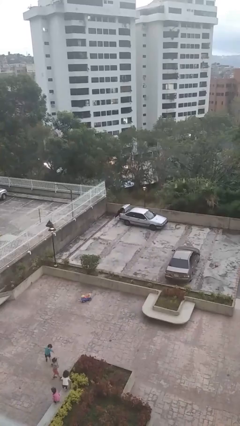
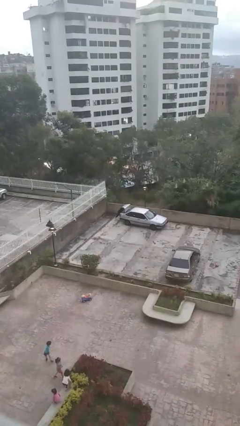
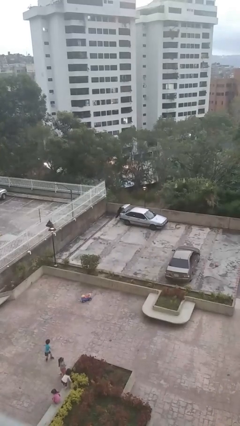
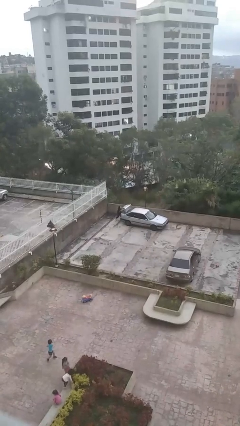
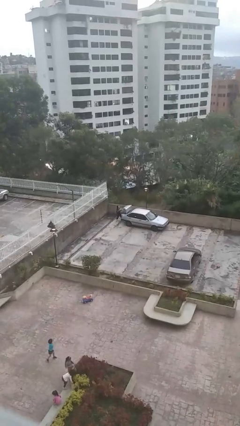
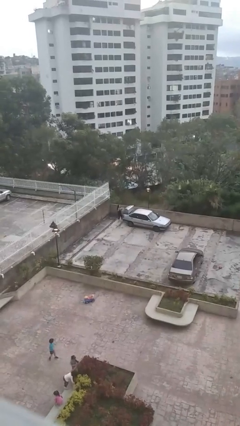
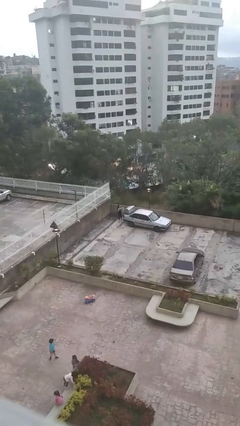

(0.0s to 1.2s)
person unloads car

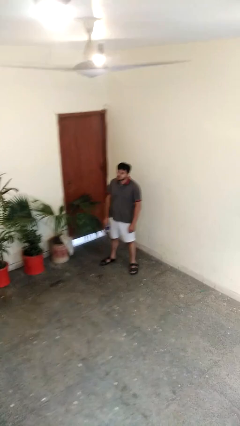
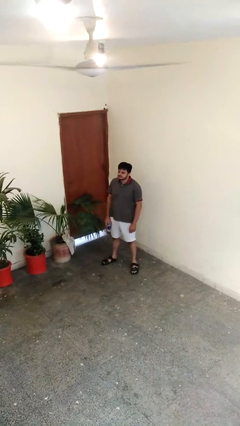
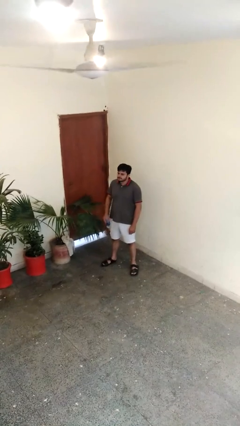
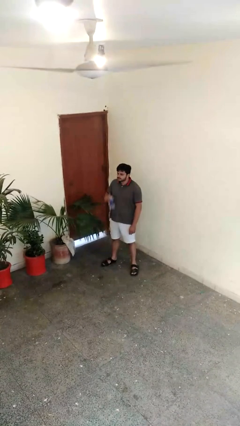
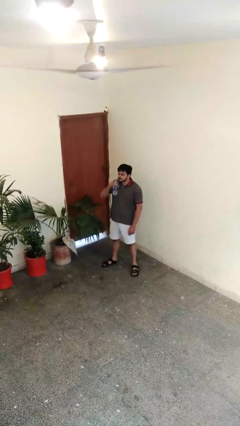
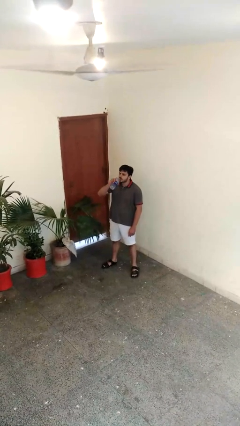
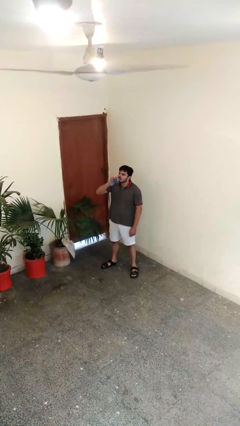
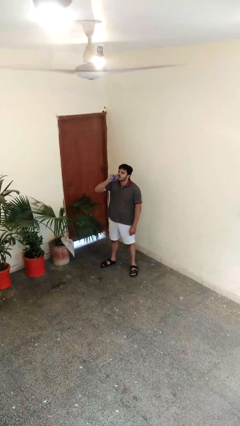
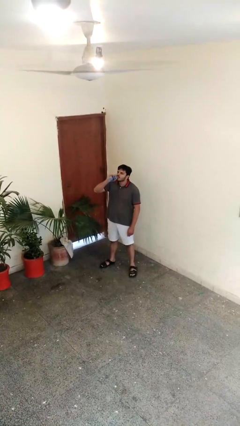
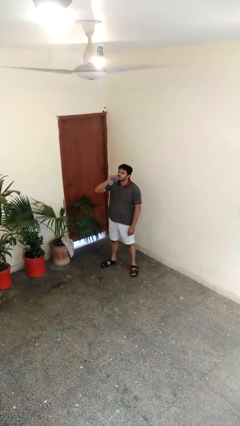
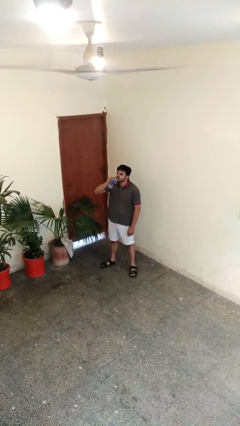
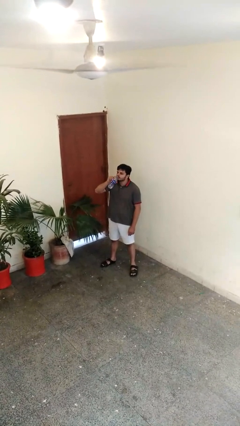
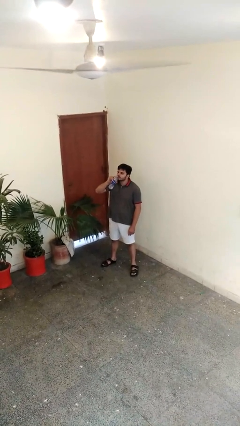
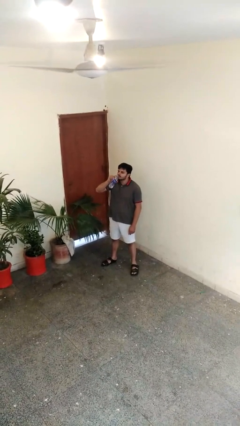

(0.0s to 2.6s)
person drinks from bottle

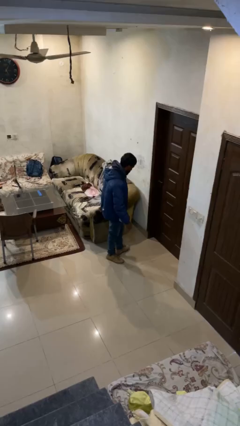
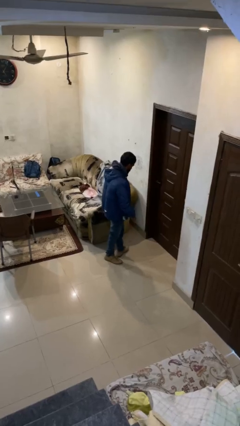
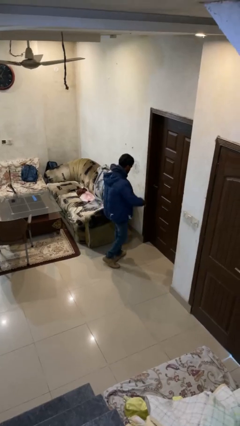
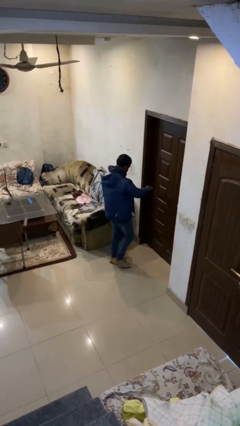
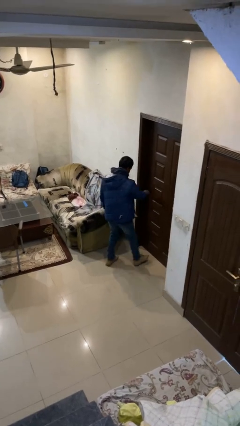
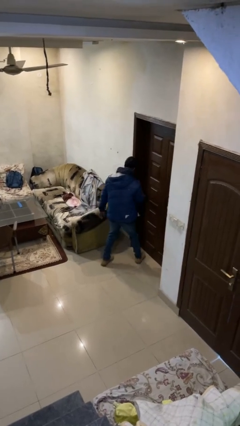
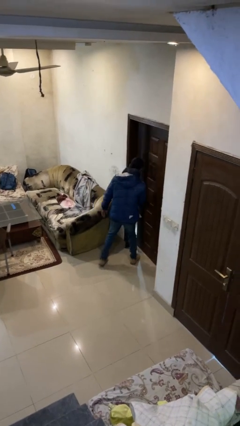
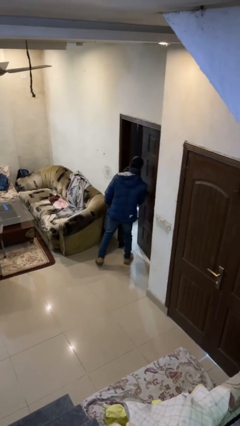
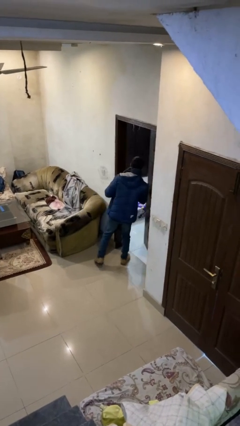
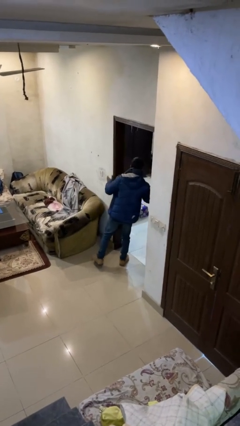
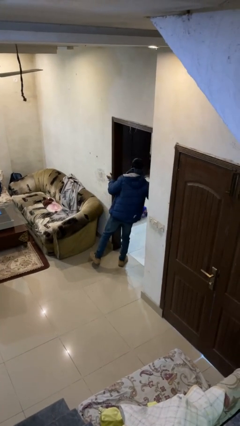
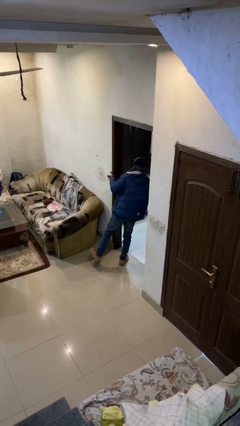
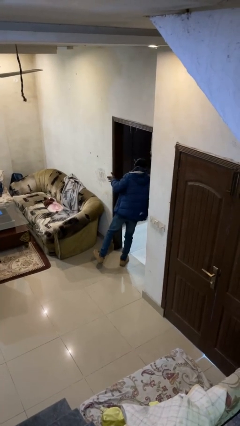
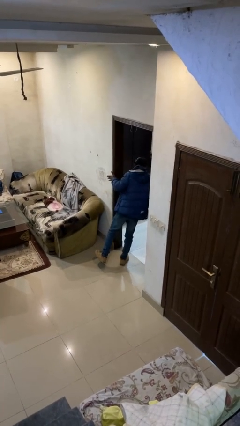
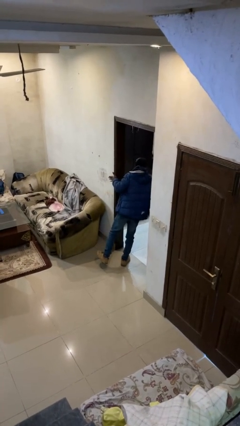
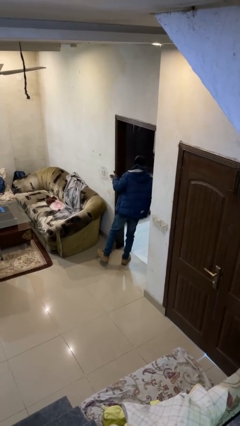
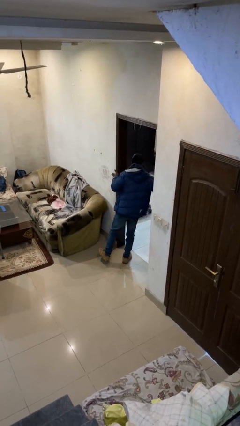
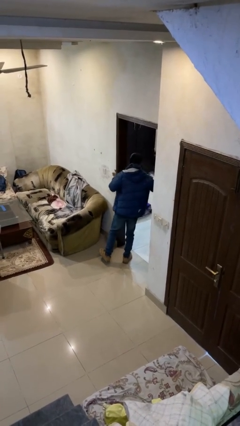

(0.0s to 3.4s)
person opens facility door

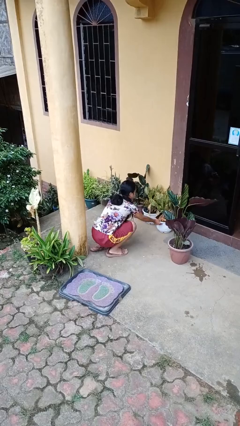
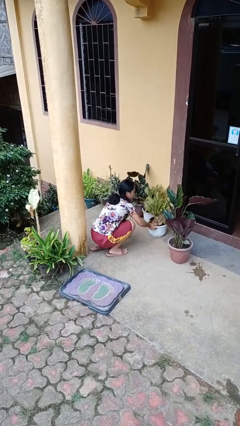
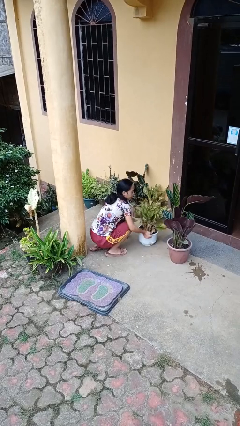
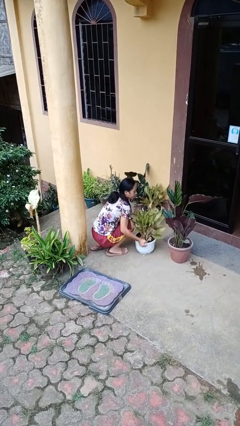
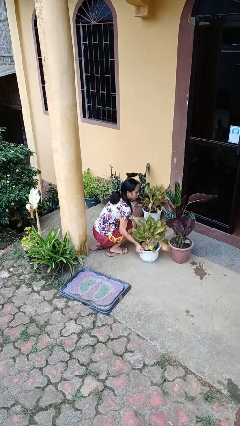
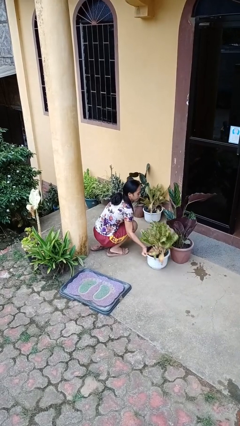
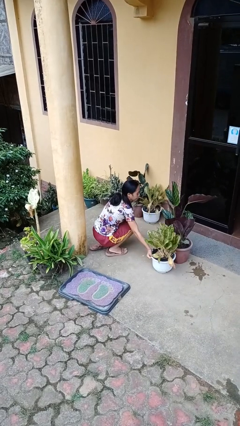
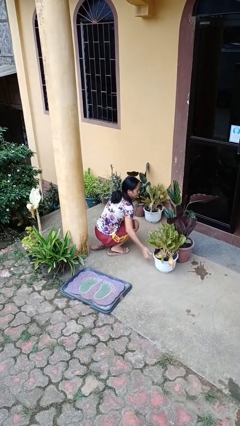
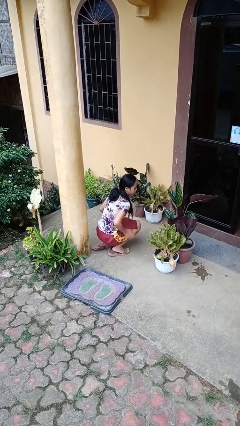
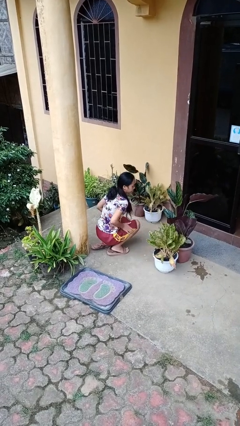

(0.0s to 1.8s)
person arranges flowers in vase

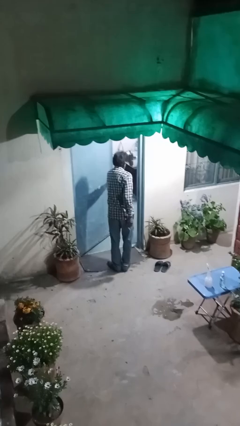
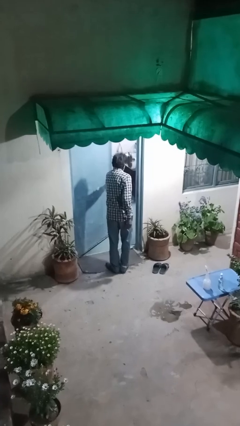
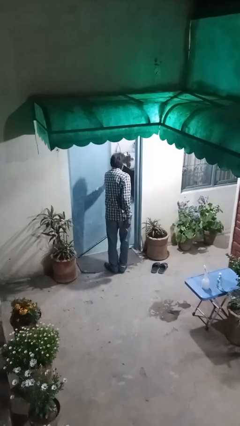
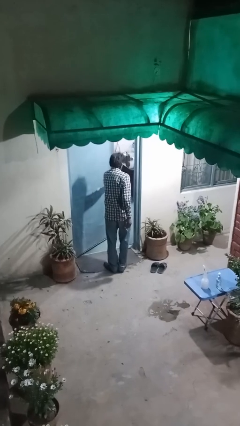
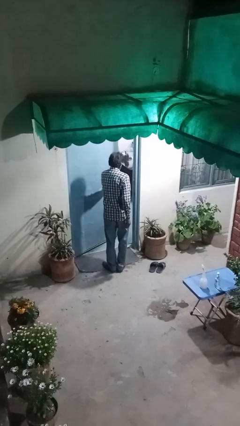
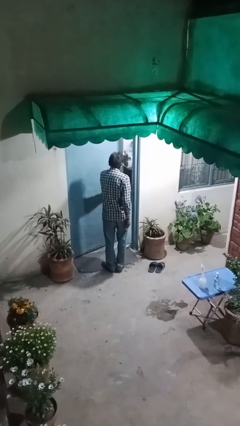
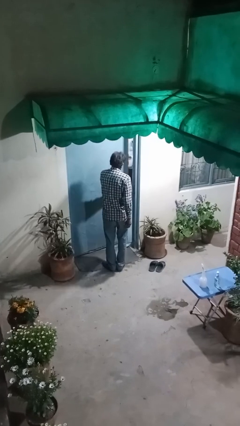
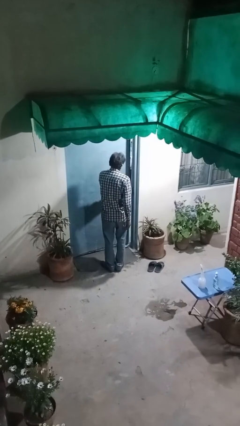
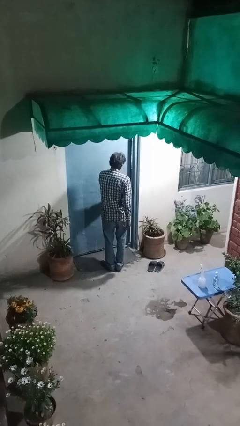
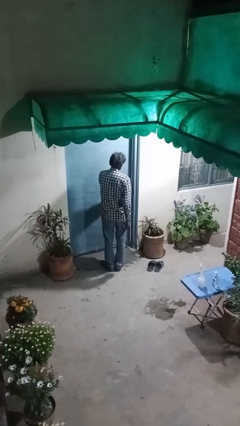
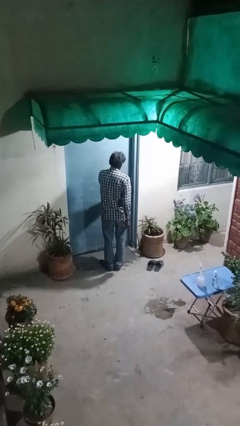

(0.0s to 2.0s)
person closes facility door

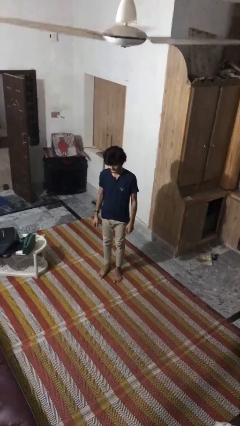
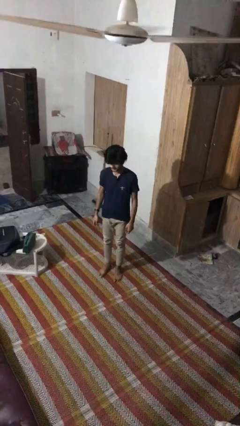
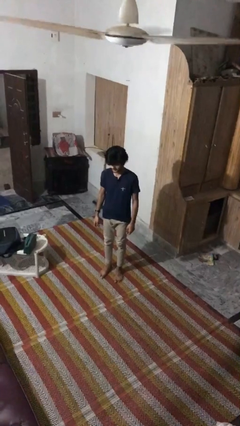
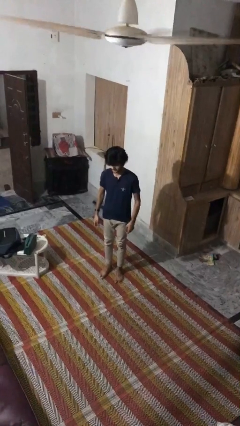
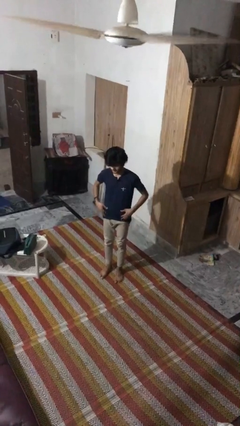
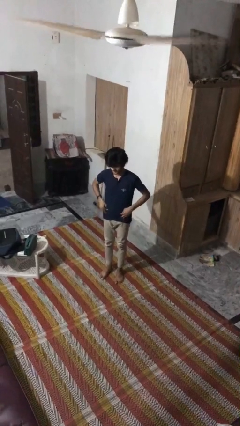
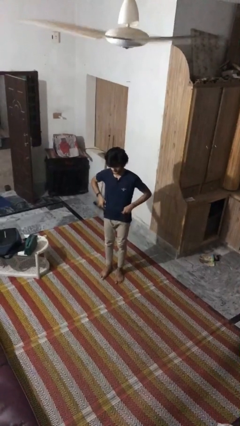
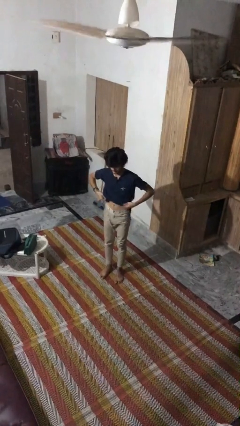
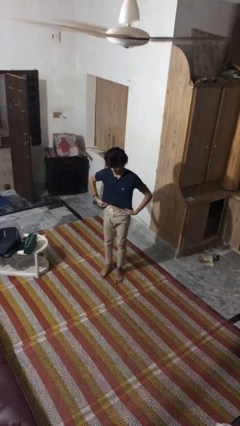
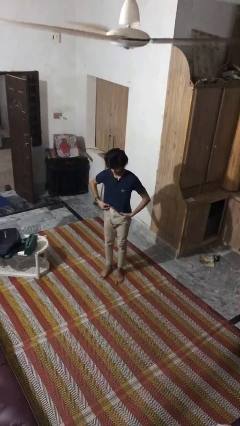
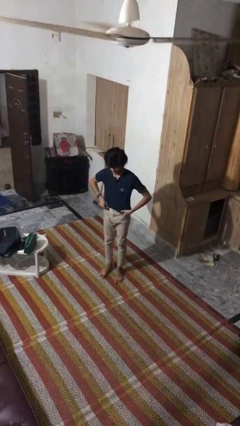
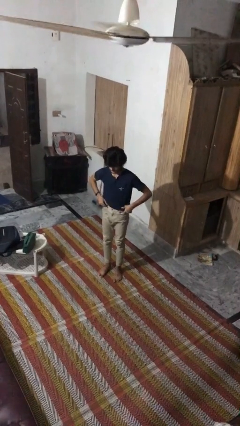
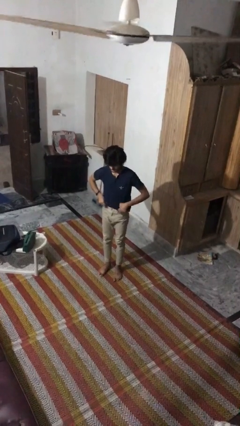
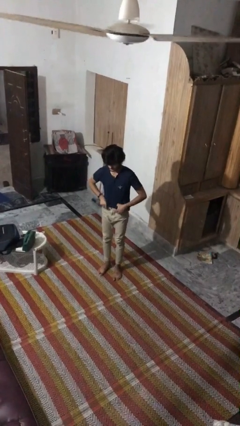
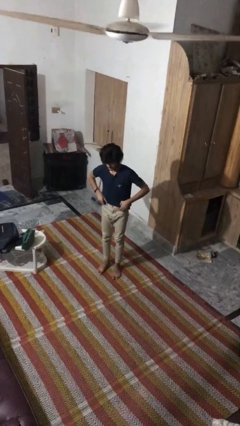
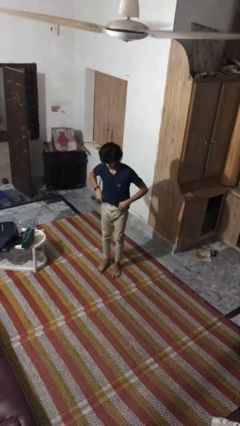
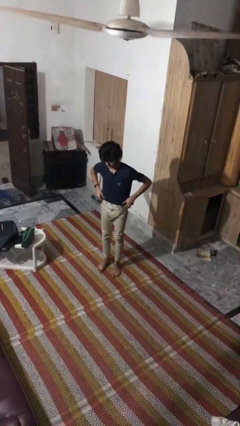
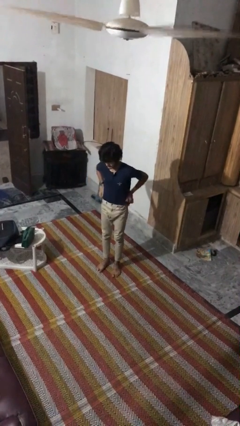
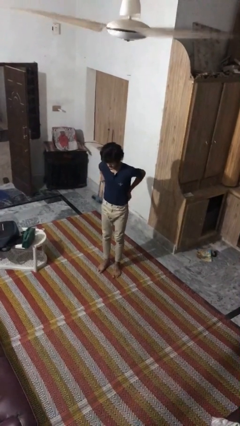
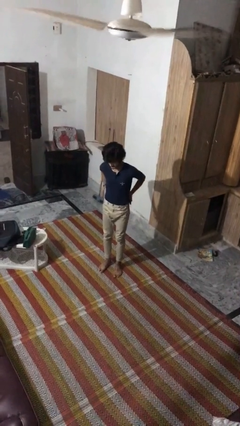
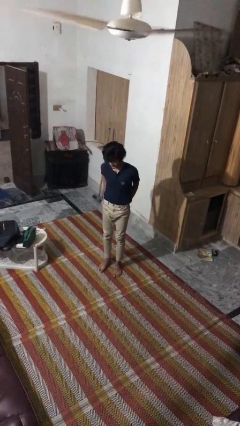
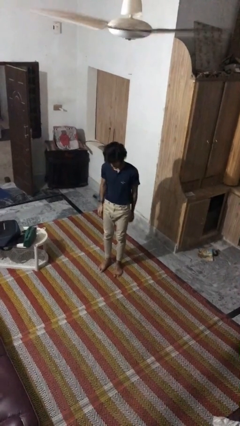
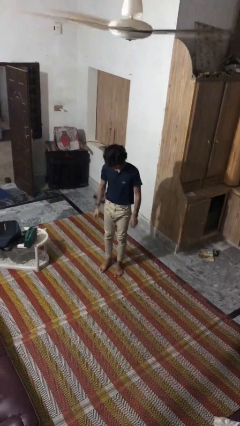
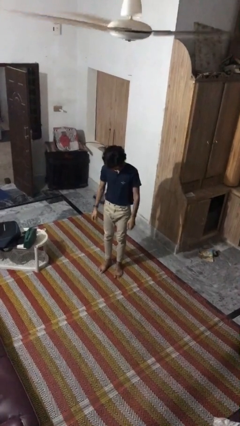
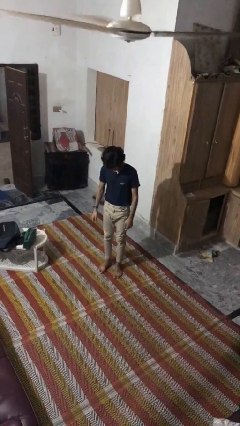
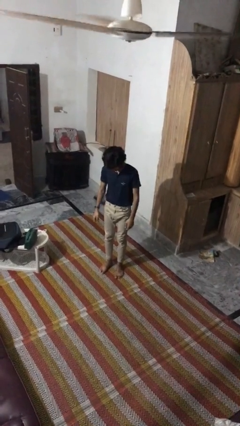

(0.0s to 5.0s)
person tucks in shirt

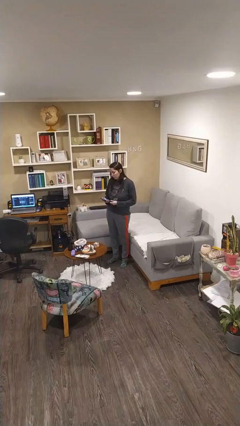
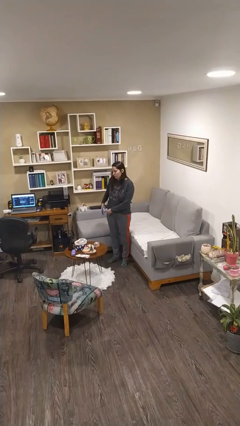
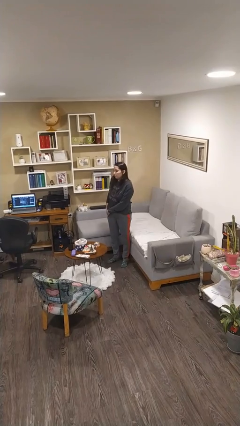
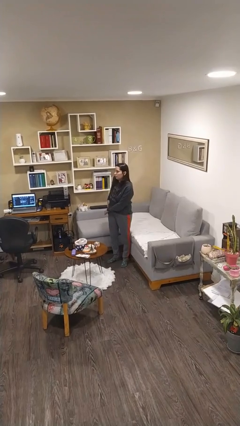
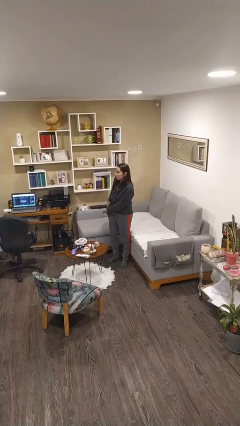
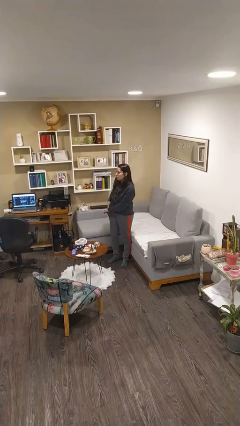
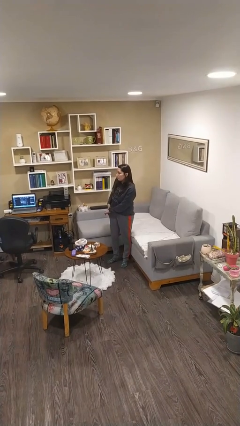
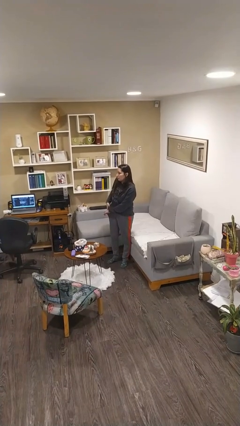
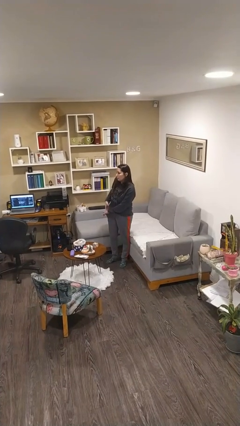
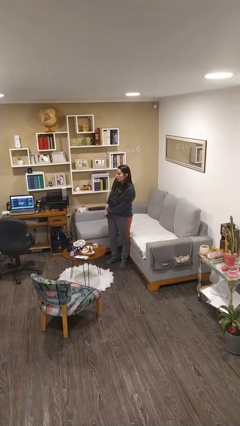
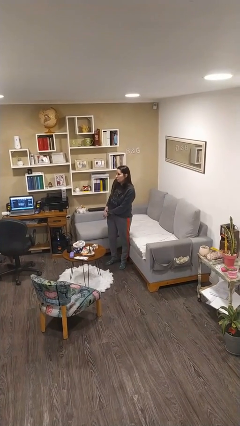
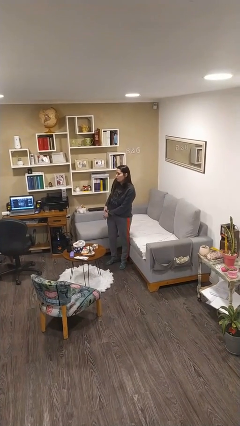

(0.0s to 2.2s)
person puts phone into pocket
